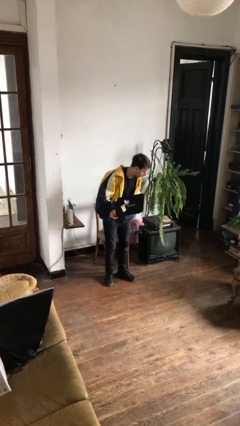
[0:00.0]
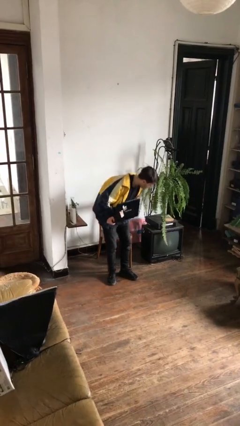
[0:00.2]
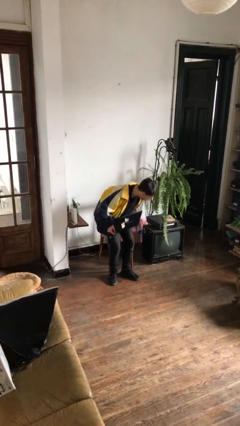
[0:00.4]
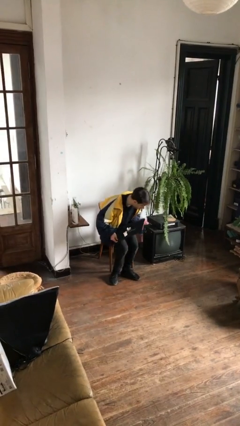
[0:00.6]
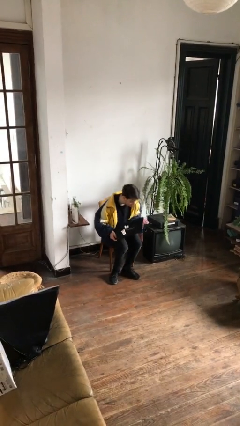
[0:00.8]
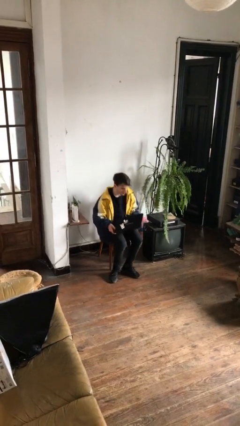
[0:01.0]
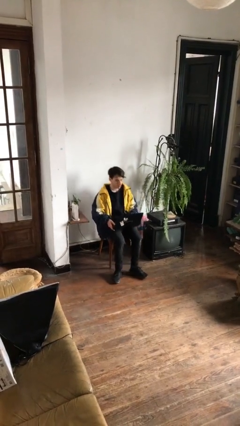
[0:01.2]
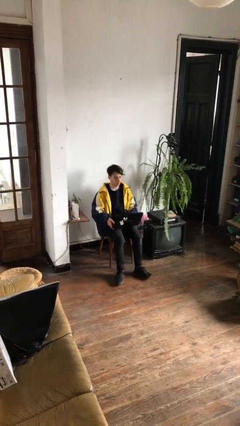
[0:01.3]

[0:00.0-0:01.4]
person sits down

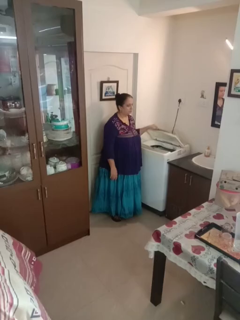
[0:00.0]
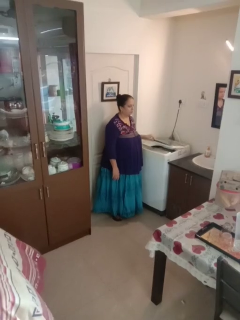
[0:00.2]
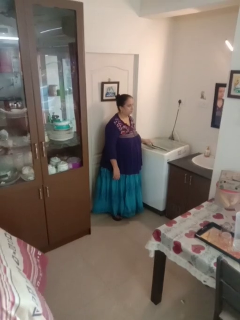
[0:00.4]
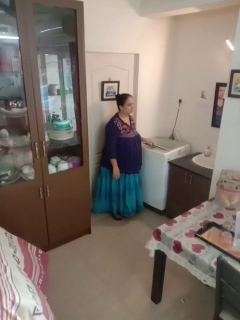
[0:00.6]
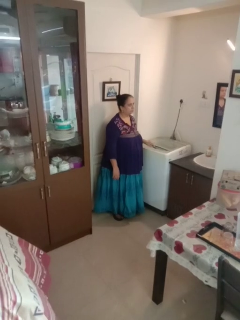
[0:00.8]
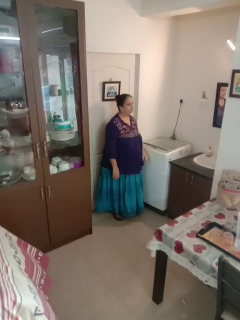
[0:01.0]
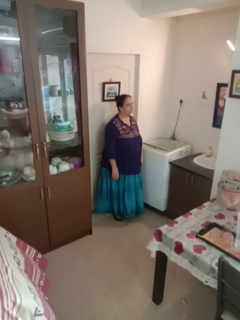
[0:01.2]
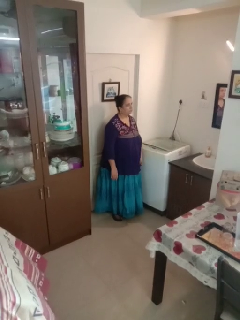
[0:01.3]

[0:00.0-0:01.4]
person closes clothes washer

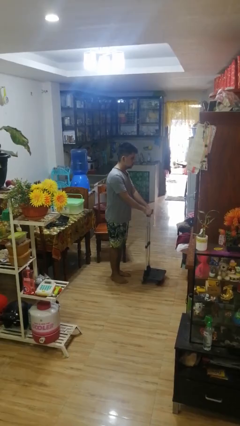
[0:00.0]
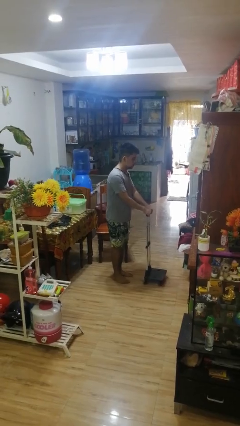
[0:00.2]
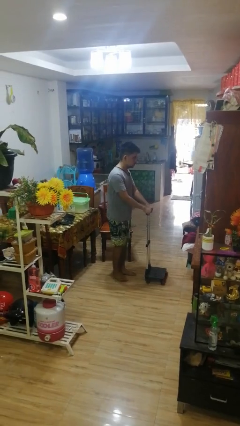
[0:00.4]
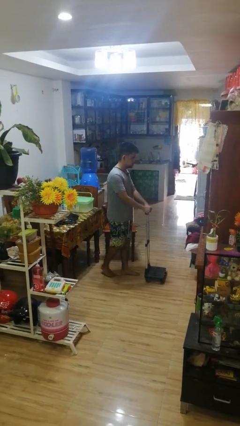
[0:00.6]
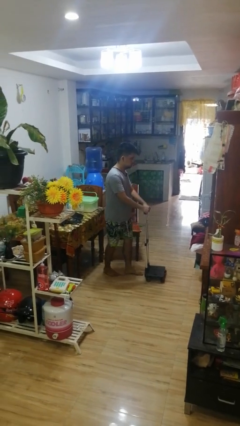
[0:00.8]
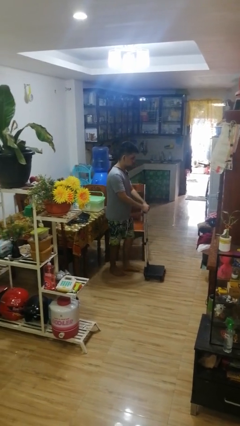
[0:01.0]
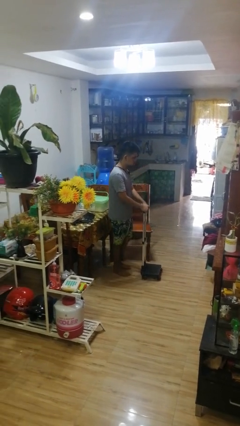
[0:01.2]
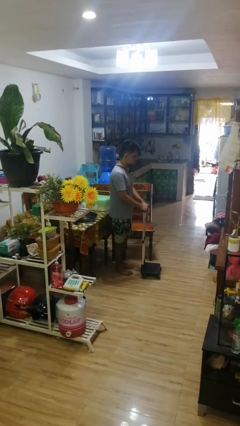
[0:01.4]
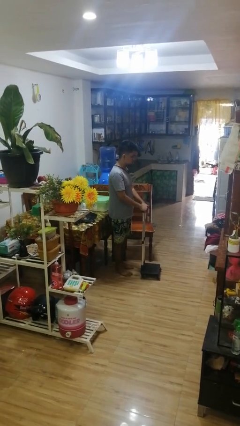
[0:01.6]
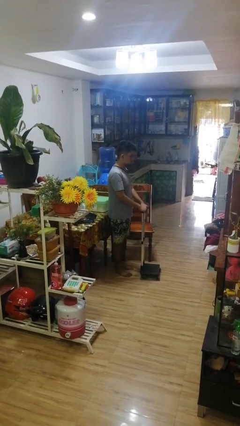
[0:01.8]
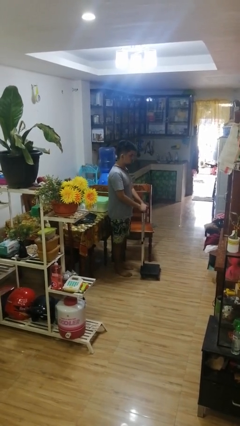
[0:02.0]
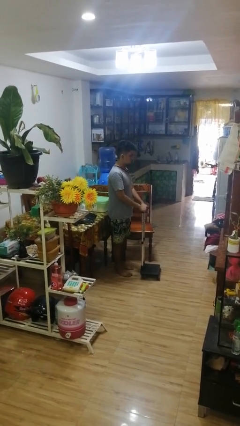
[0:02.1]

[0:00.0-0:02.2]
person pulls wheeled cart

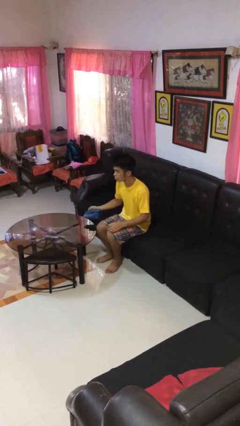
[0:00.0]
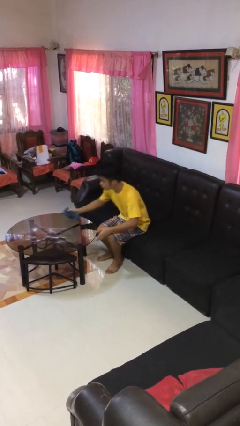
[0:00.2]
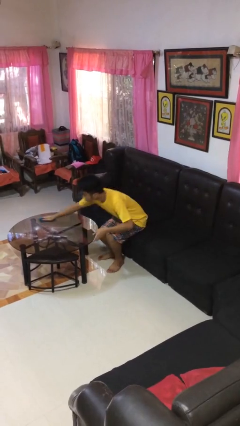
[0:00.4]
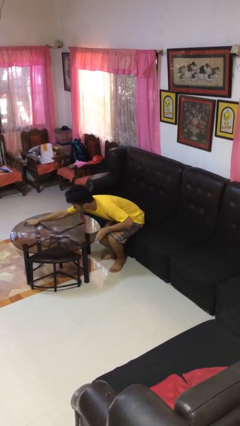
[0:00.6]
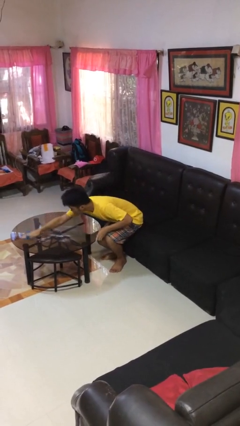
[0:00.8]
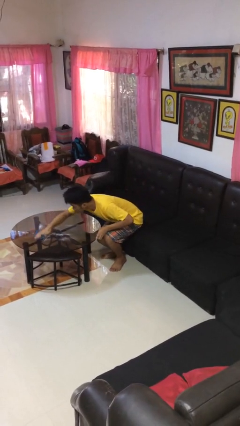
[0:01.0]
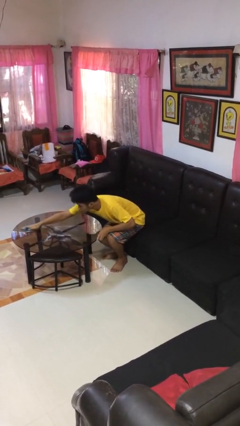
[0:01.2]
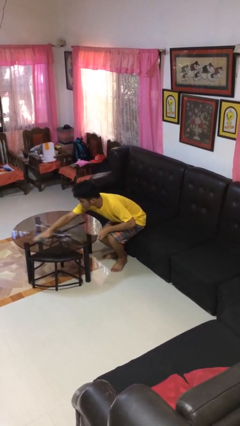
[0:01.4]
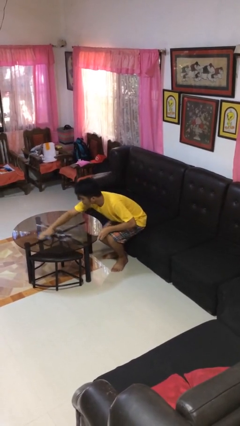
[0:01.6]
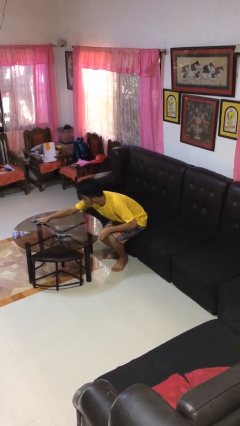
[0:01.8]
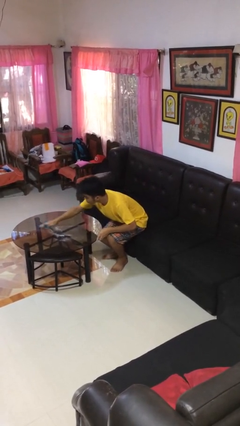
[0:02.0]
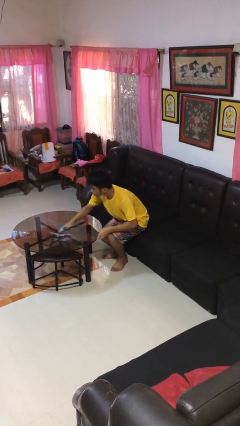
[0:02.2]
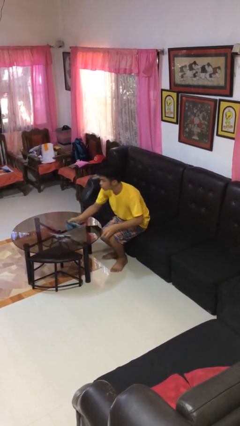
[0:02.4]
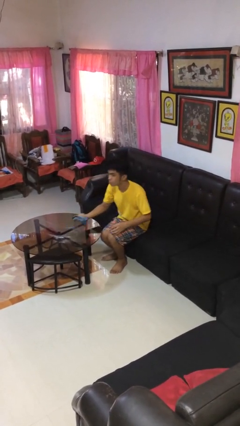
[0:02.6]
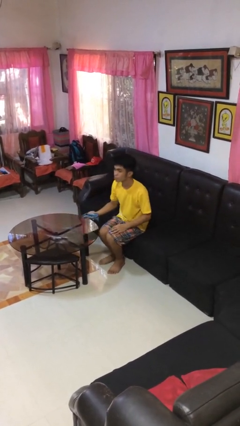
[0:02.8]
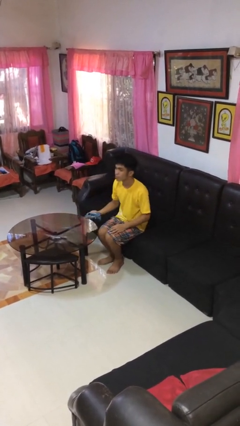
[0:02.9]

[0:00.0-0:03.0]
person cleans table with rag

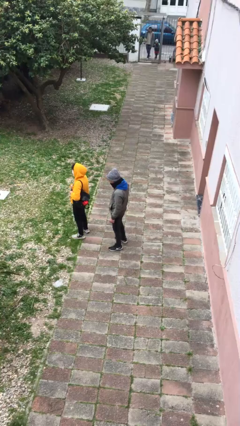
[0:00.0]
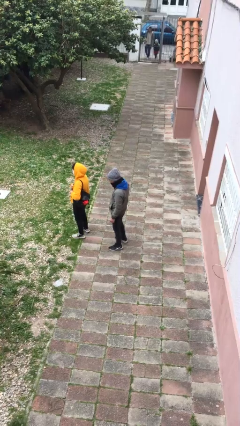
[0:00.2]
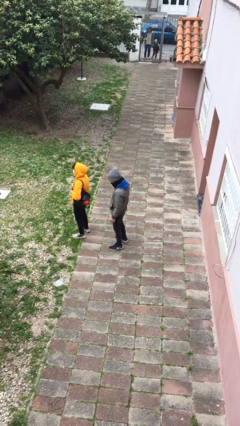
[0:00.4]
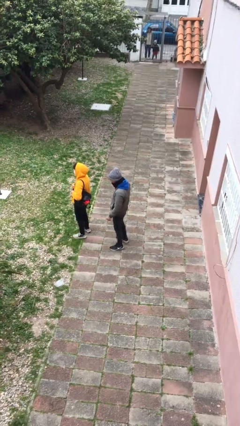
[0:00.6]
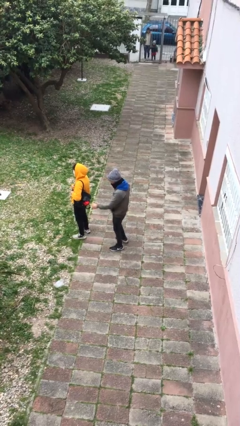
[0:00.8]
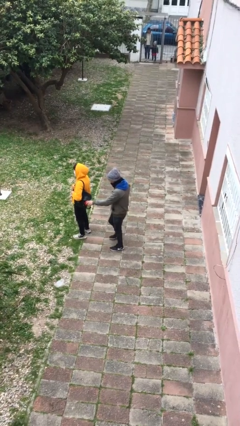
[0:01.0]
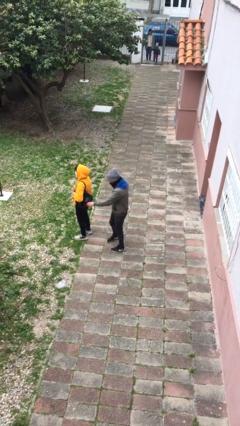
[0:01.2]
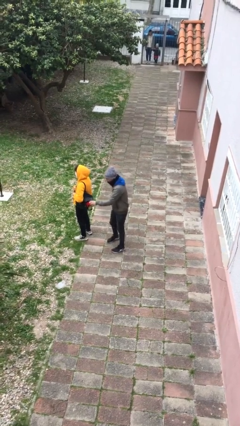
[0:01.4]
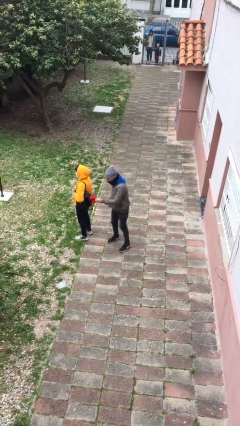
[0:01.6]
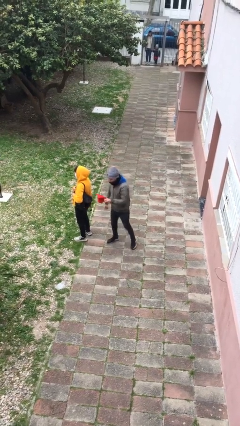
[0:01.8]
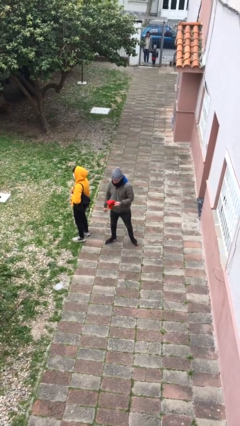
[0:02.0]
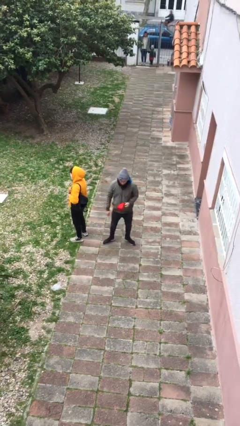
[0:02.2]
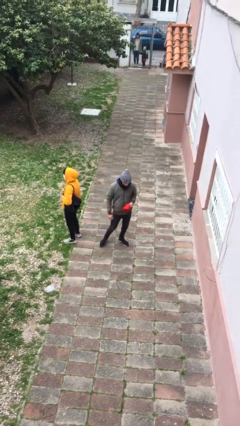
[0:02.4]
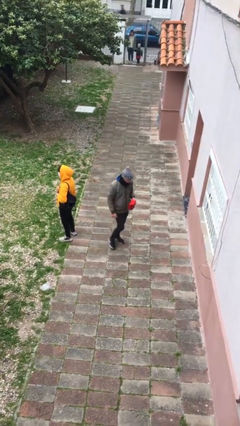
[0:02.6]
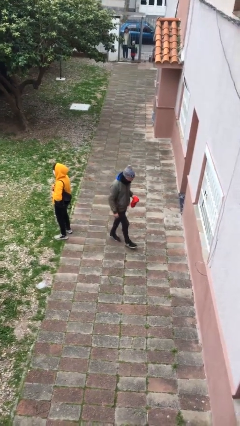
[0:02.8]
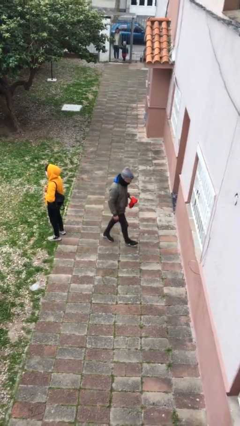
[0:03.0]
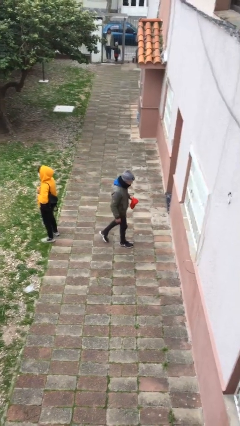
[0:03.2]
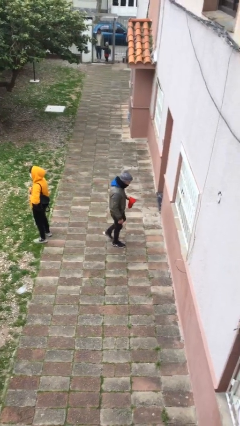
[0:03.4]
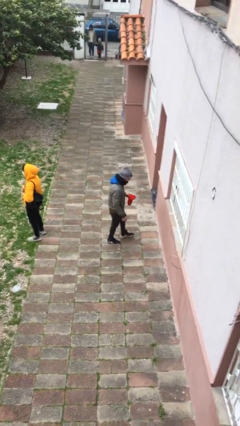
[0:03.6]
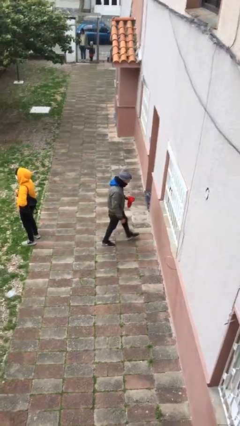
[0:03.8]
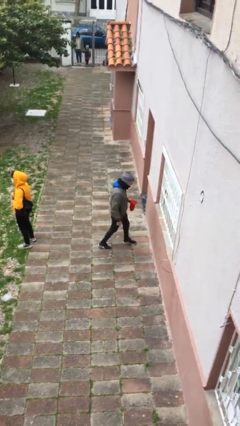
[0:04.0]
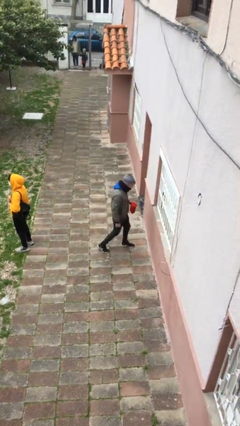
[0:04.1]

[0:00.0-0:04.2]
person steals object from person

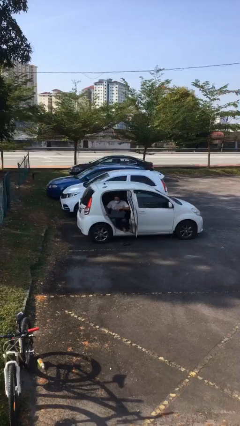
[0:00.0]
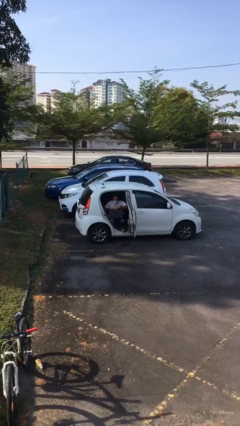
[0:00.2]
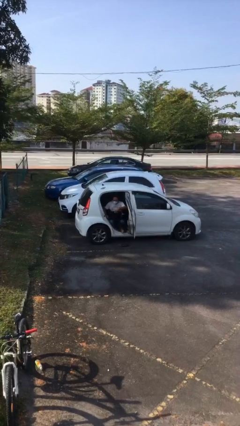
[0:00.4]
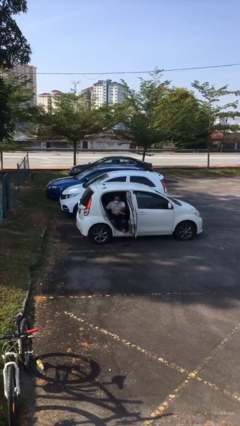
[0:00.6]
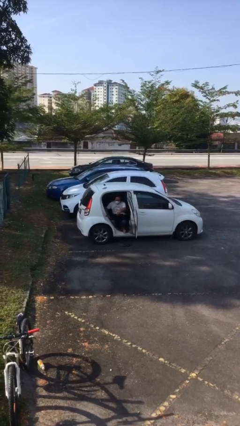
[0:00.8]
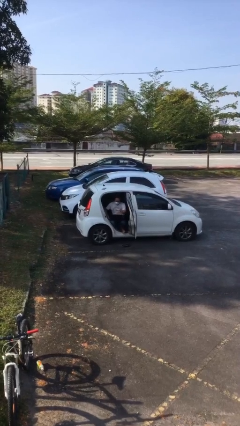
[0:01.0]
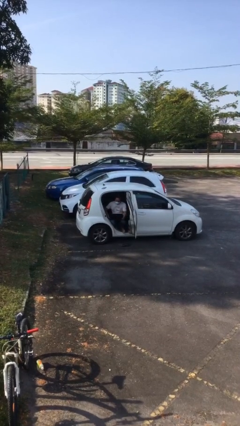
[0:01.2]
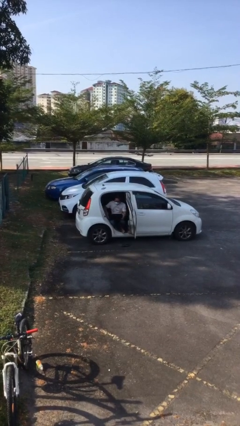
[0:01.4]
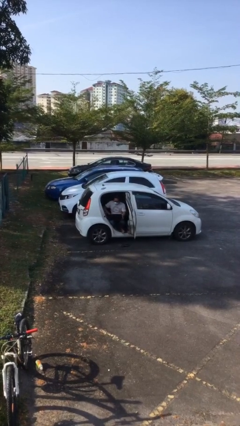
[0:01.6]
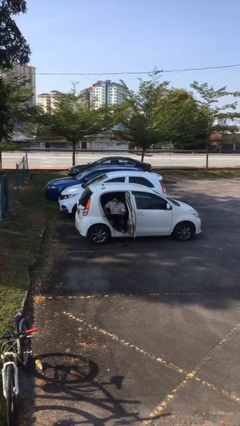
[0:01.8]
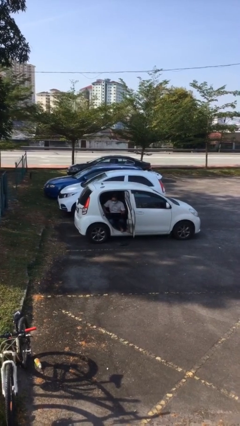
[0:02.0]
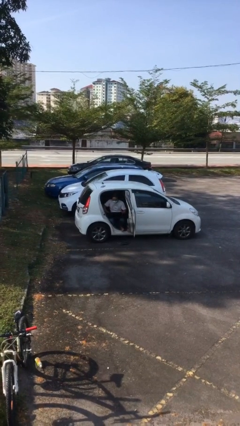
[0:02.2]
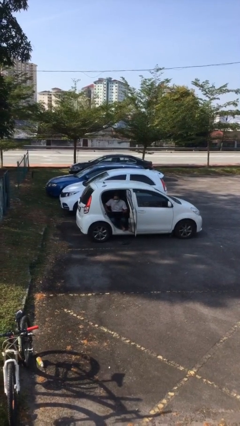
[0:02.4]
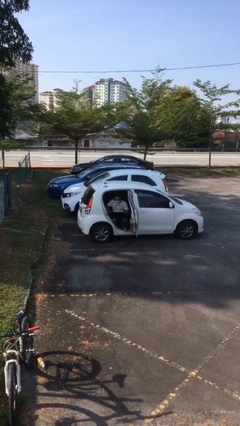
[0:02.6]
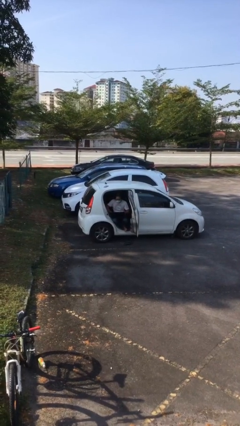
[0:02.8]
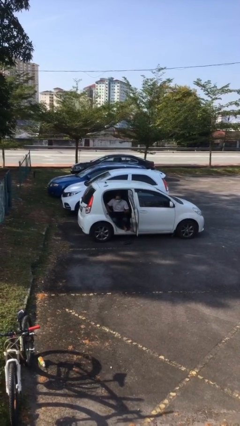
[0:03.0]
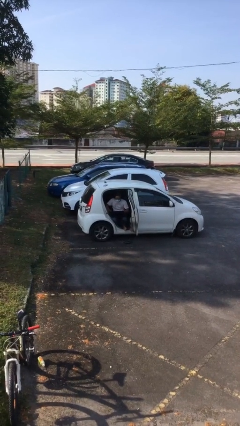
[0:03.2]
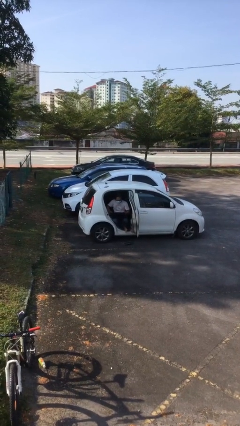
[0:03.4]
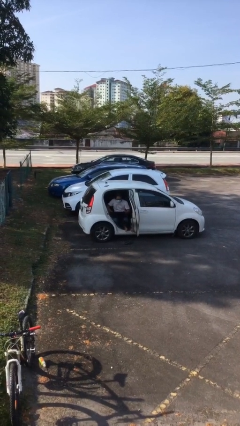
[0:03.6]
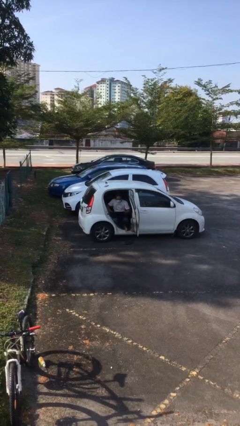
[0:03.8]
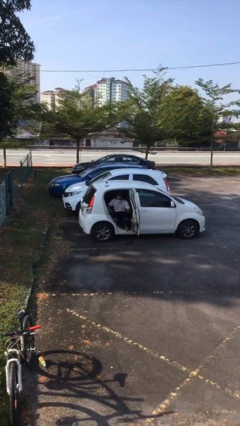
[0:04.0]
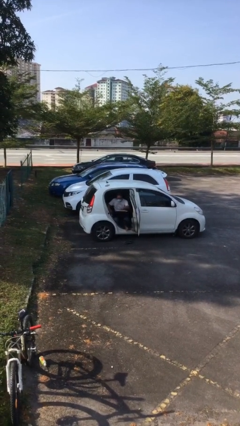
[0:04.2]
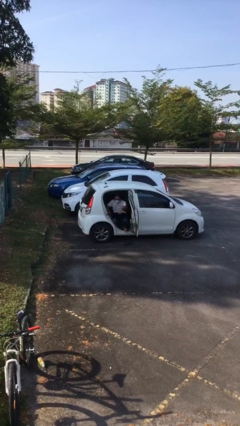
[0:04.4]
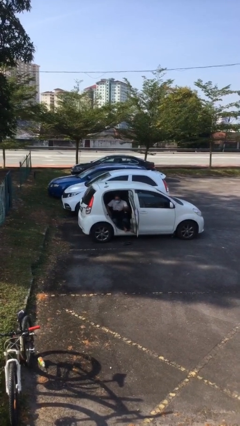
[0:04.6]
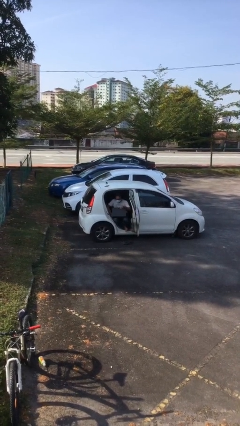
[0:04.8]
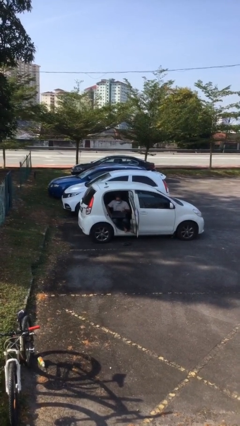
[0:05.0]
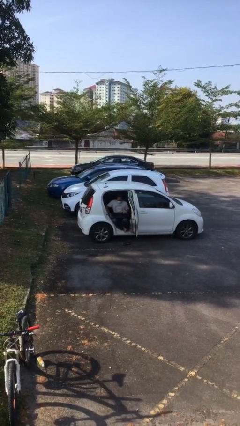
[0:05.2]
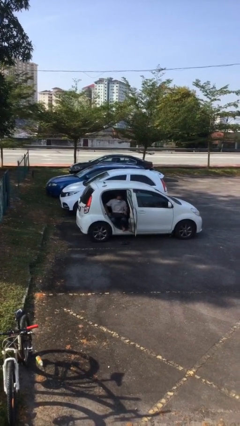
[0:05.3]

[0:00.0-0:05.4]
person interacts with laptop
